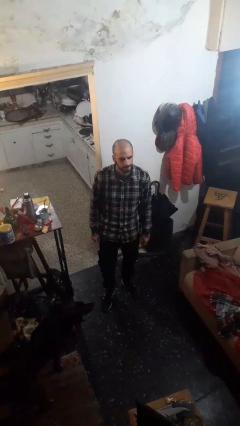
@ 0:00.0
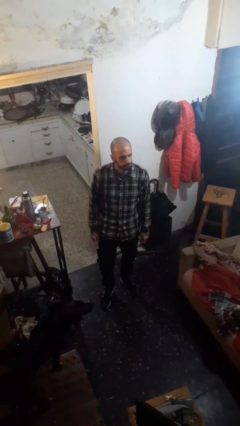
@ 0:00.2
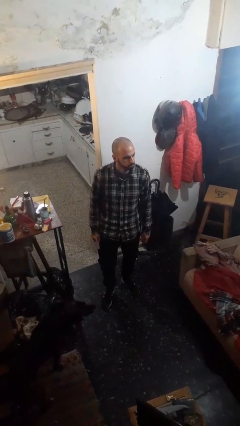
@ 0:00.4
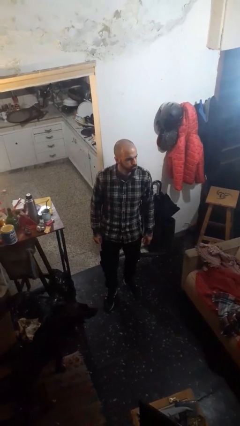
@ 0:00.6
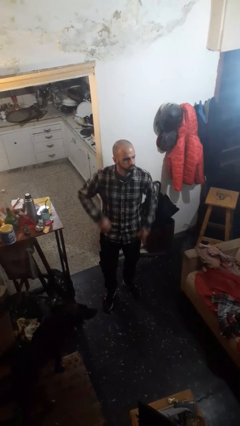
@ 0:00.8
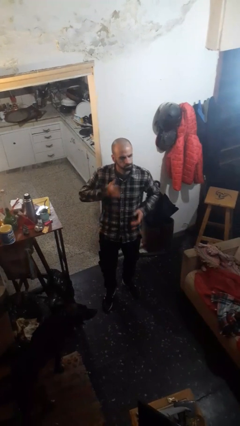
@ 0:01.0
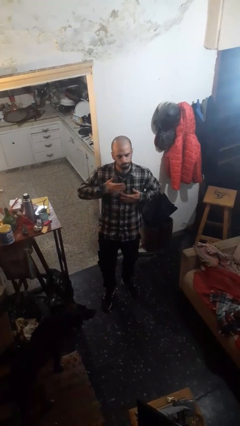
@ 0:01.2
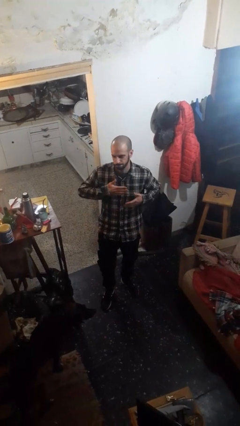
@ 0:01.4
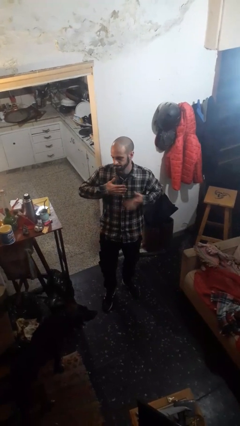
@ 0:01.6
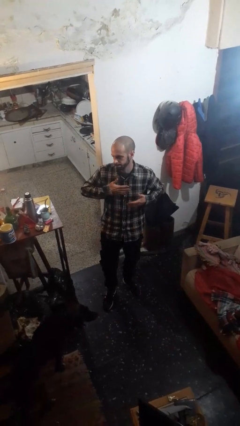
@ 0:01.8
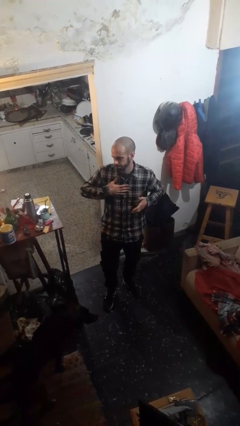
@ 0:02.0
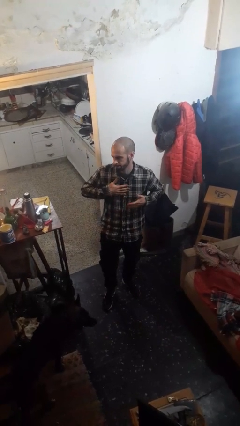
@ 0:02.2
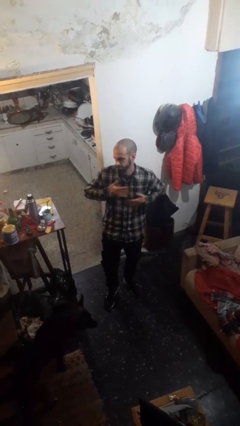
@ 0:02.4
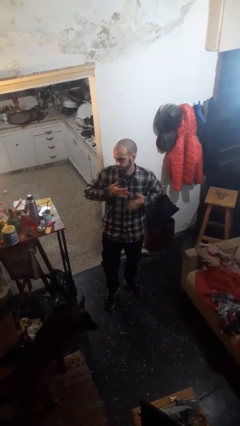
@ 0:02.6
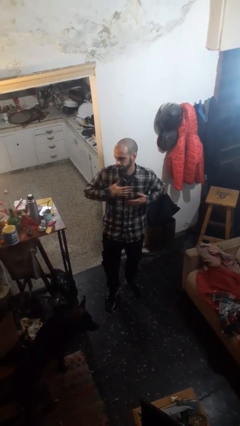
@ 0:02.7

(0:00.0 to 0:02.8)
person drums on chest

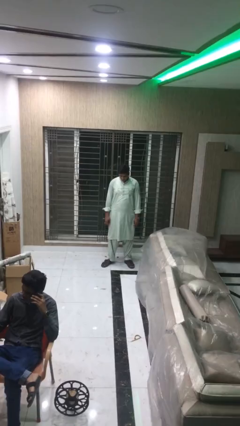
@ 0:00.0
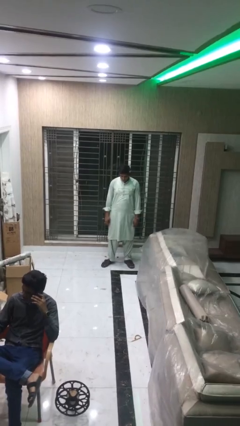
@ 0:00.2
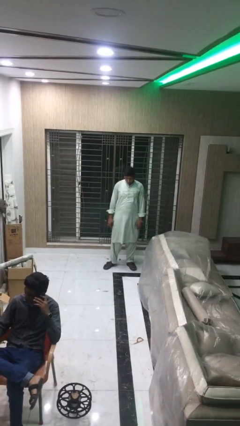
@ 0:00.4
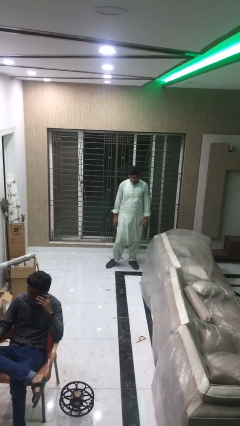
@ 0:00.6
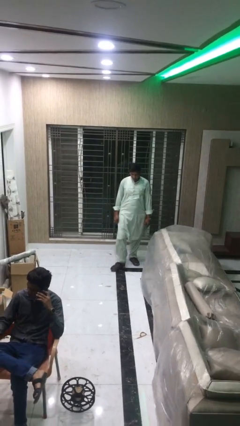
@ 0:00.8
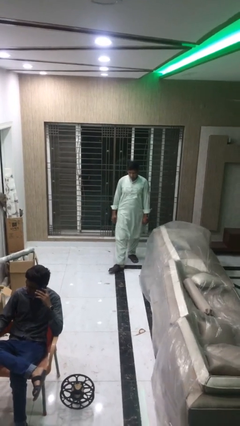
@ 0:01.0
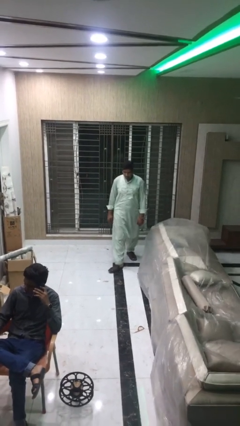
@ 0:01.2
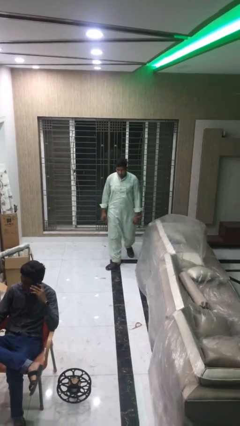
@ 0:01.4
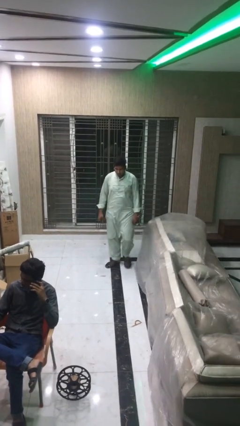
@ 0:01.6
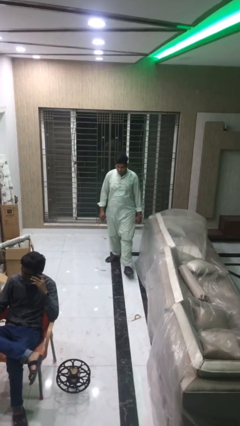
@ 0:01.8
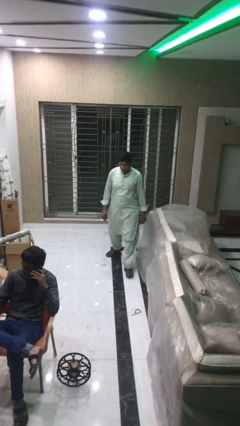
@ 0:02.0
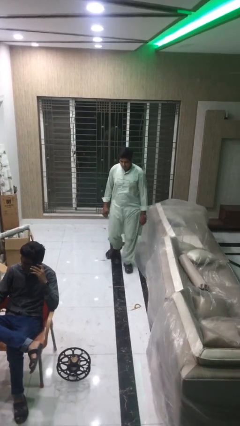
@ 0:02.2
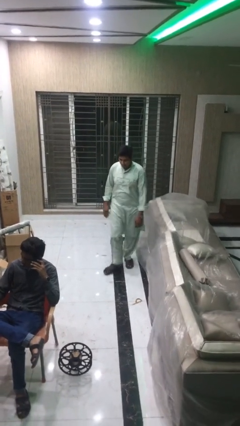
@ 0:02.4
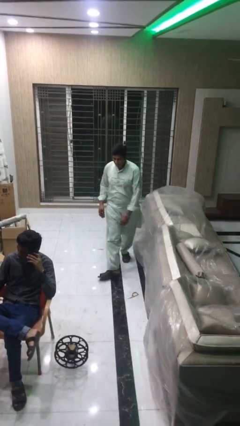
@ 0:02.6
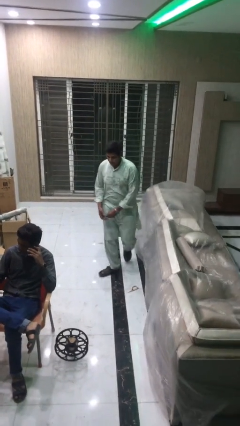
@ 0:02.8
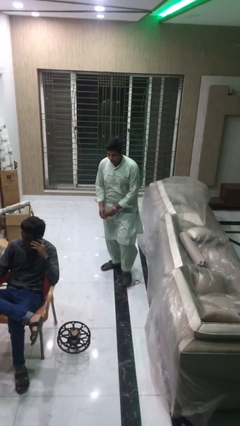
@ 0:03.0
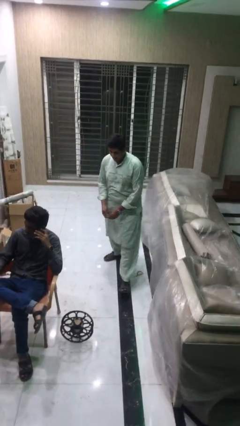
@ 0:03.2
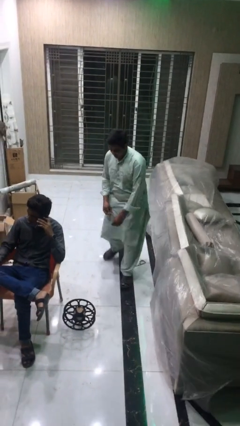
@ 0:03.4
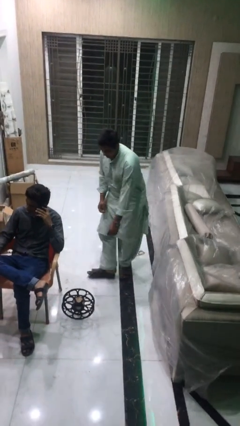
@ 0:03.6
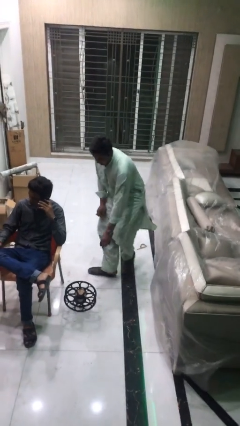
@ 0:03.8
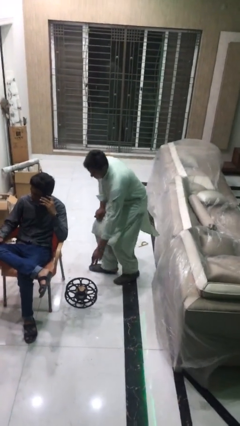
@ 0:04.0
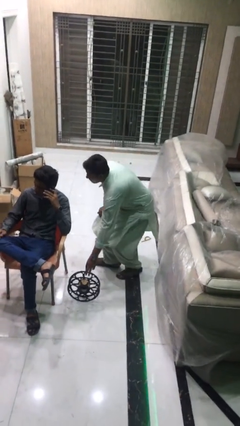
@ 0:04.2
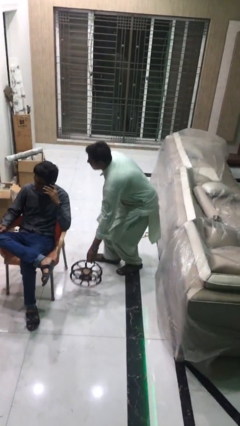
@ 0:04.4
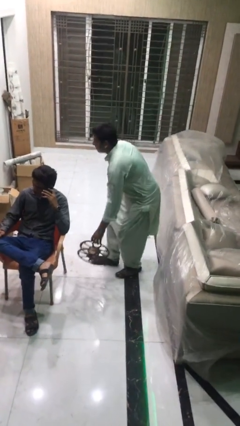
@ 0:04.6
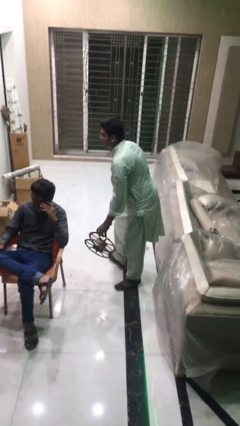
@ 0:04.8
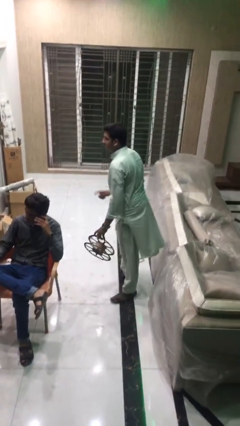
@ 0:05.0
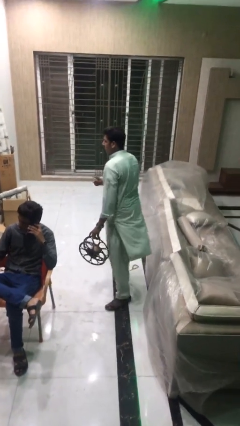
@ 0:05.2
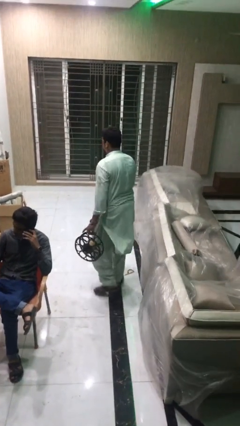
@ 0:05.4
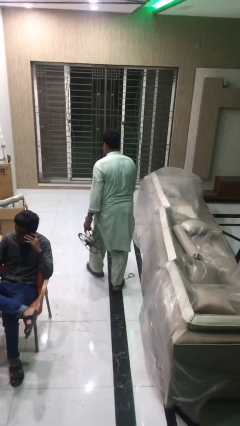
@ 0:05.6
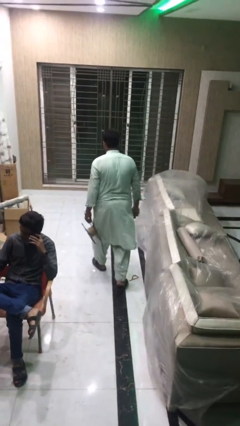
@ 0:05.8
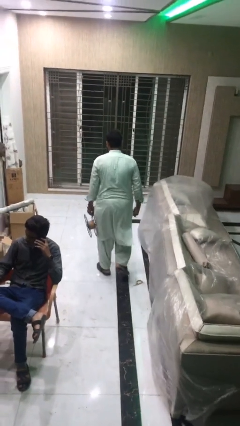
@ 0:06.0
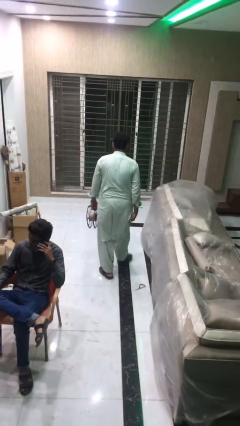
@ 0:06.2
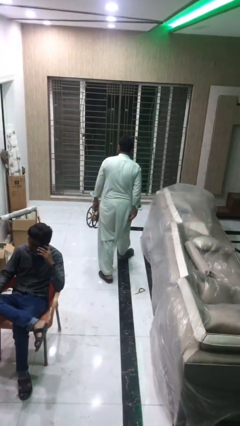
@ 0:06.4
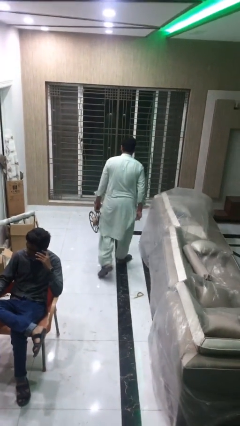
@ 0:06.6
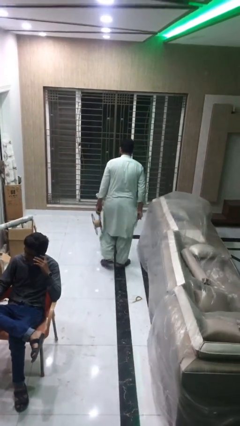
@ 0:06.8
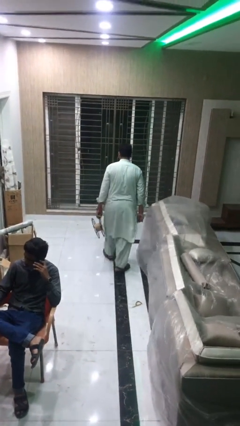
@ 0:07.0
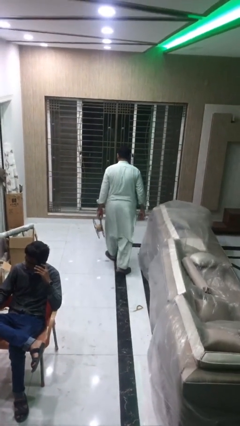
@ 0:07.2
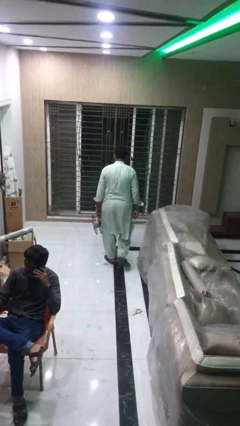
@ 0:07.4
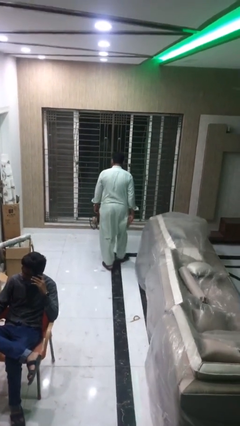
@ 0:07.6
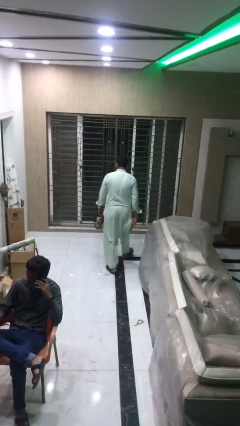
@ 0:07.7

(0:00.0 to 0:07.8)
person steals object from person

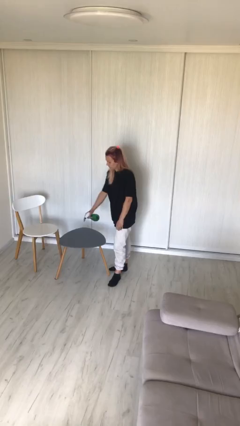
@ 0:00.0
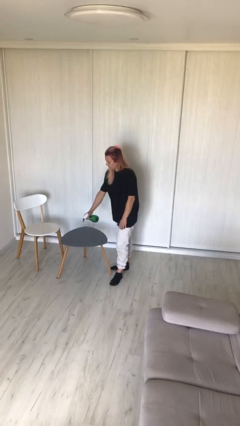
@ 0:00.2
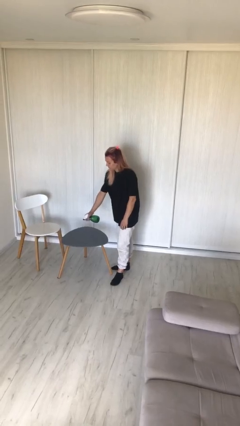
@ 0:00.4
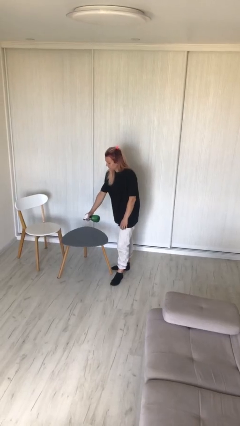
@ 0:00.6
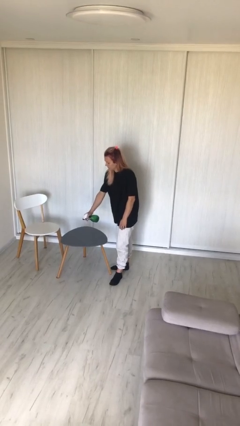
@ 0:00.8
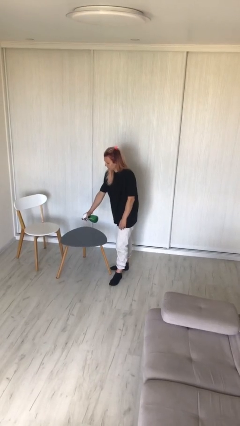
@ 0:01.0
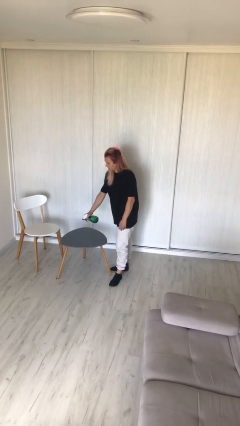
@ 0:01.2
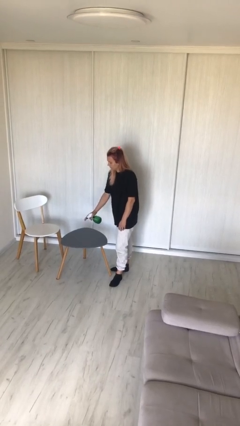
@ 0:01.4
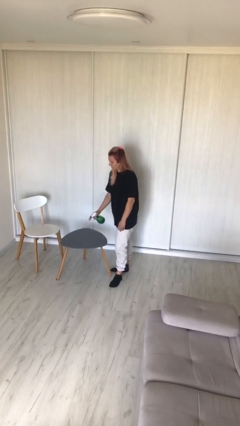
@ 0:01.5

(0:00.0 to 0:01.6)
person sprays from bottle

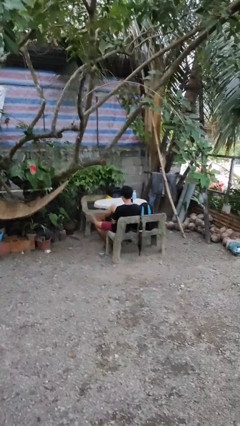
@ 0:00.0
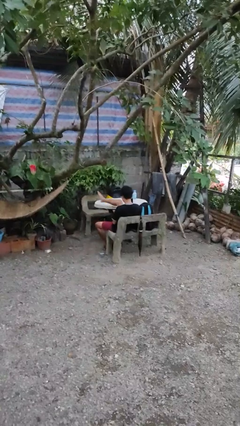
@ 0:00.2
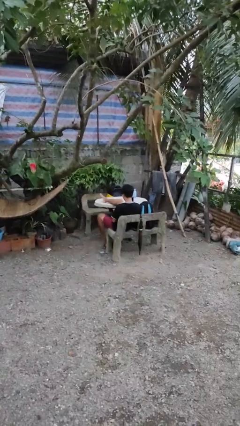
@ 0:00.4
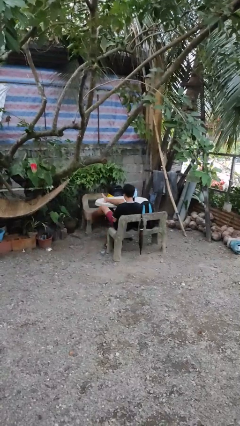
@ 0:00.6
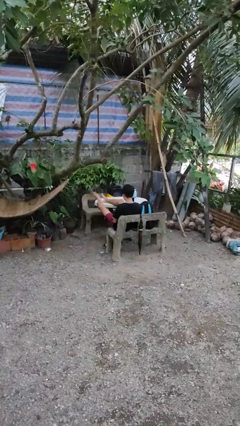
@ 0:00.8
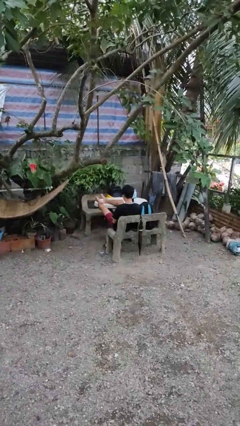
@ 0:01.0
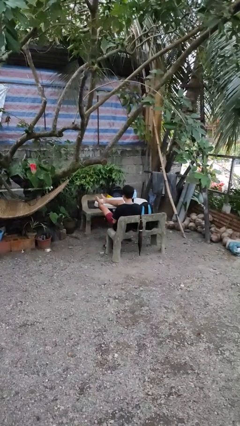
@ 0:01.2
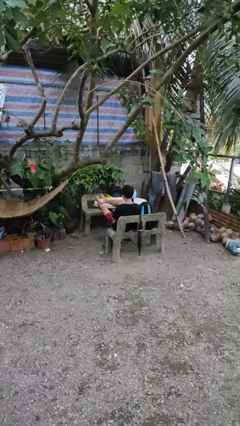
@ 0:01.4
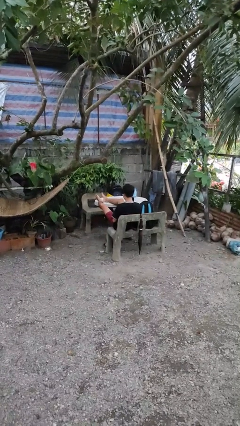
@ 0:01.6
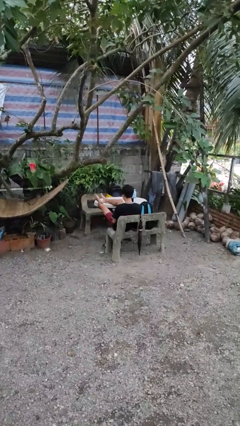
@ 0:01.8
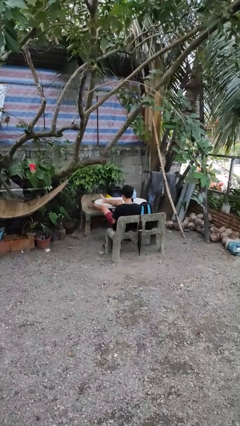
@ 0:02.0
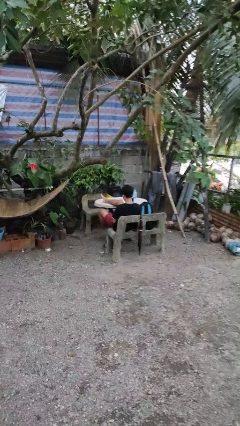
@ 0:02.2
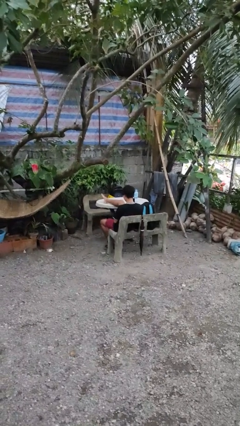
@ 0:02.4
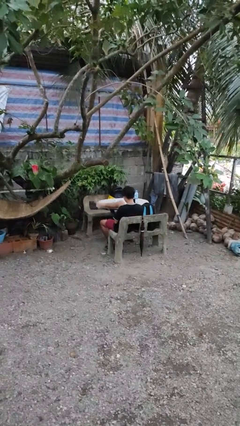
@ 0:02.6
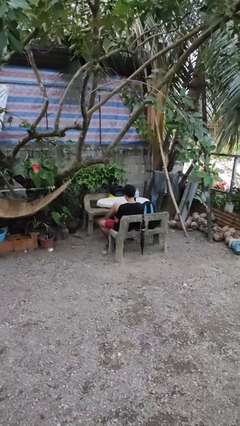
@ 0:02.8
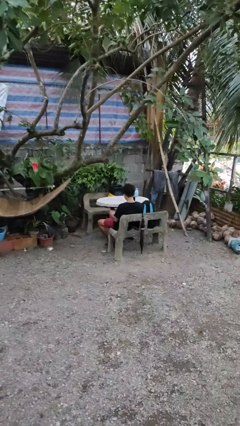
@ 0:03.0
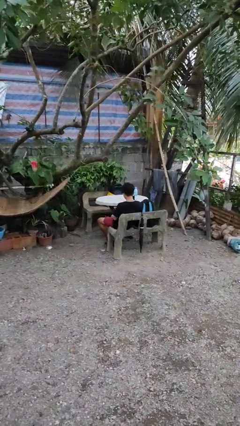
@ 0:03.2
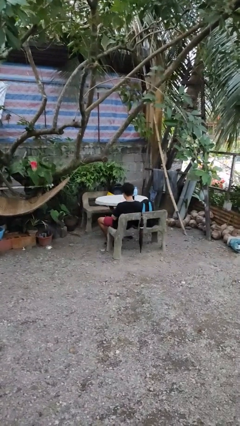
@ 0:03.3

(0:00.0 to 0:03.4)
person puts feet up

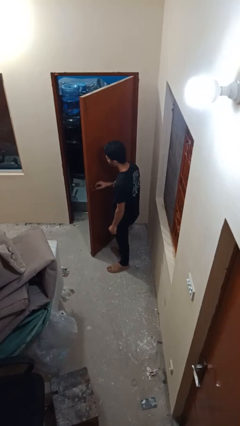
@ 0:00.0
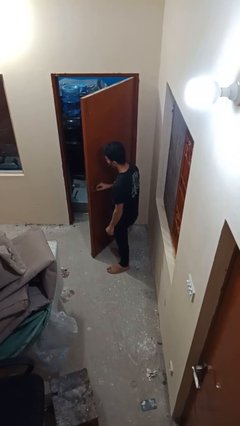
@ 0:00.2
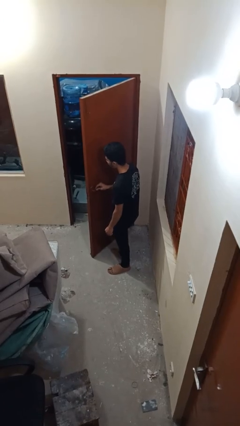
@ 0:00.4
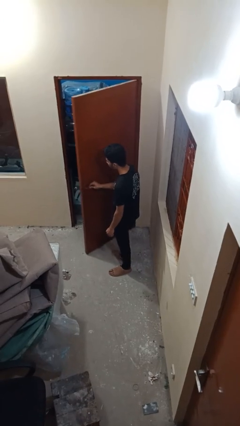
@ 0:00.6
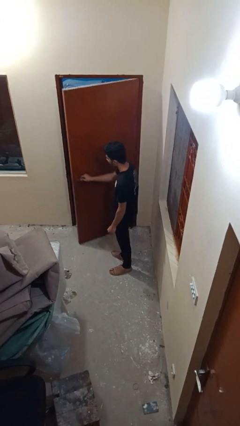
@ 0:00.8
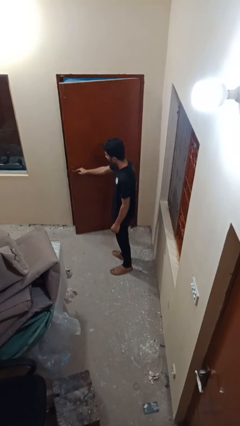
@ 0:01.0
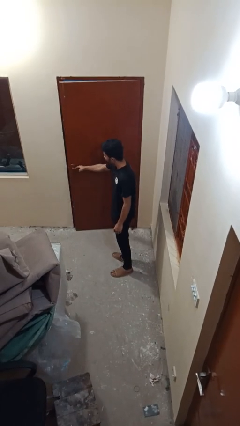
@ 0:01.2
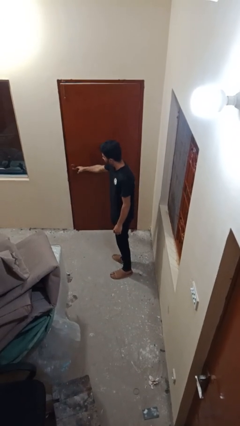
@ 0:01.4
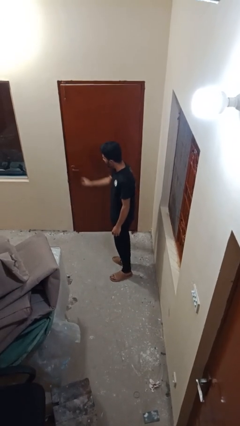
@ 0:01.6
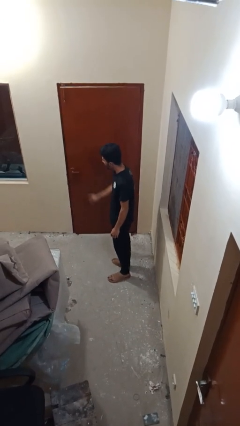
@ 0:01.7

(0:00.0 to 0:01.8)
person closes facility door
